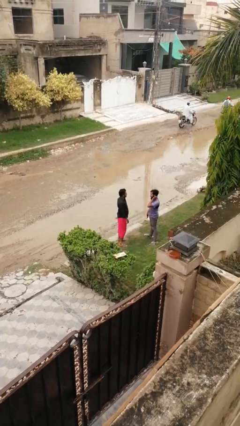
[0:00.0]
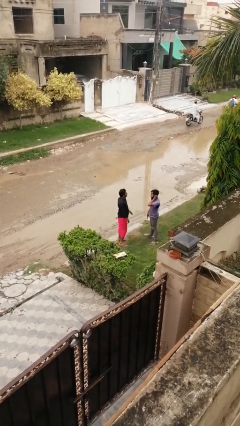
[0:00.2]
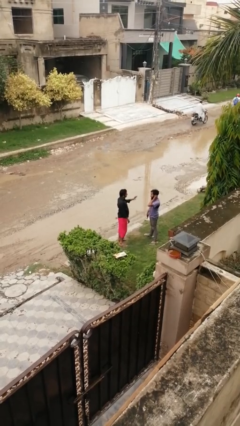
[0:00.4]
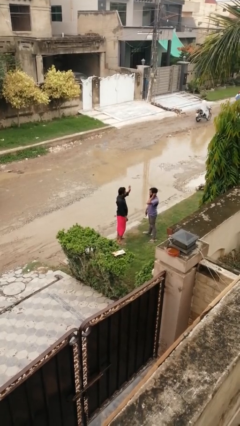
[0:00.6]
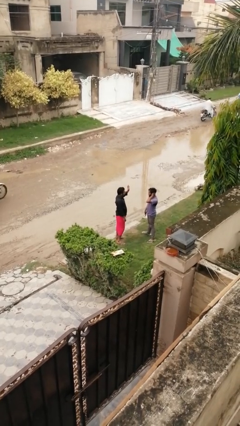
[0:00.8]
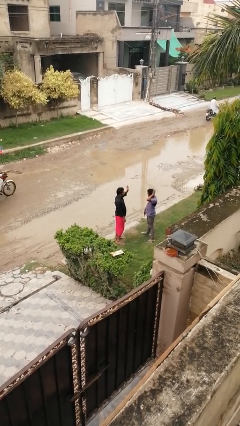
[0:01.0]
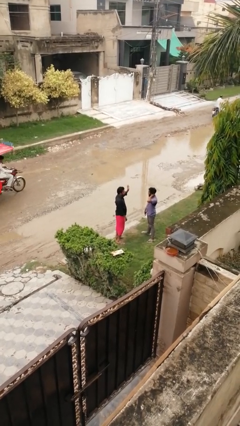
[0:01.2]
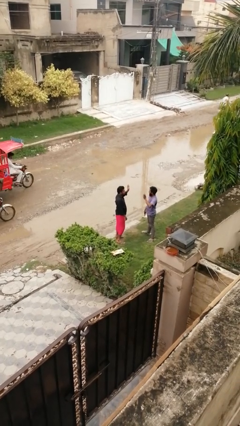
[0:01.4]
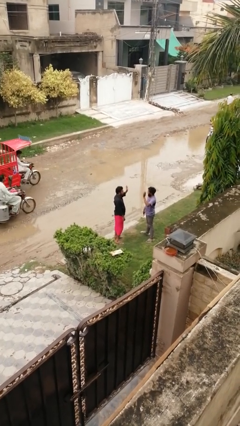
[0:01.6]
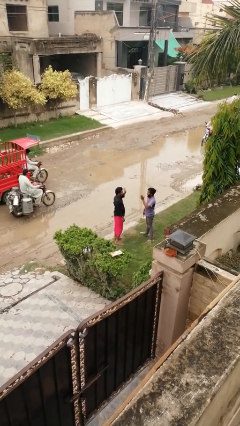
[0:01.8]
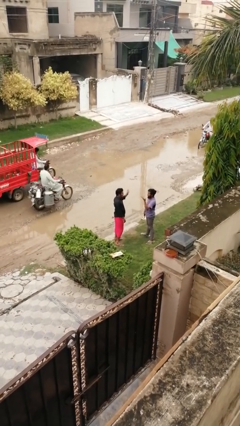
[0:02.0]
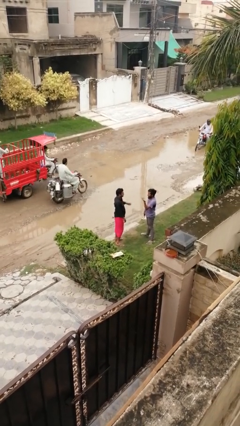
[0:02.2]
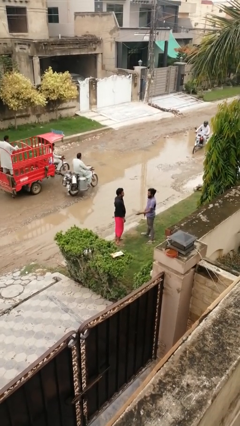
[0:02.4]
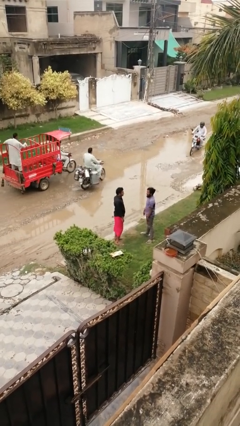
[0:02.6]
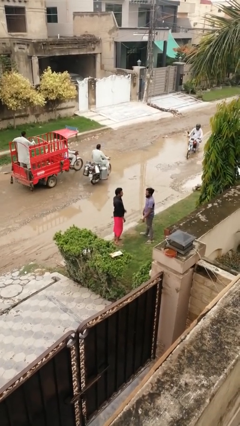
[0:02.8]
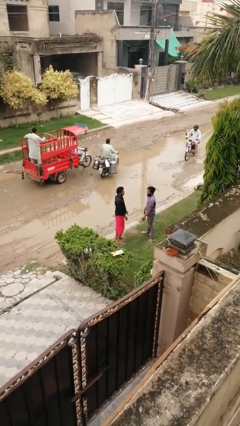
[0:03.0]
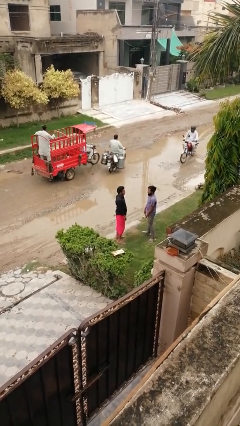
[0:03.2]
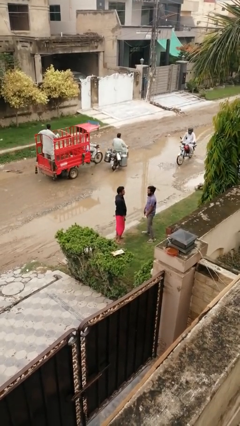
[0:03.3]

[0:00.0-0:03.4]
person talks to person

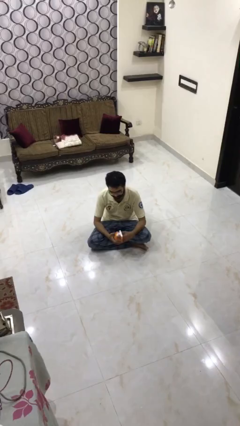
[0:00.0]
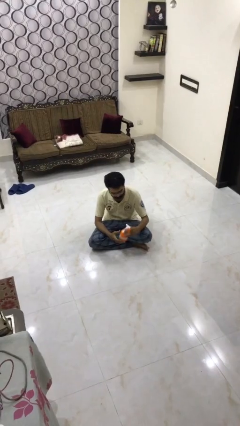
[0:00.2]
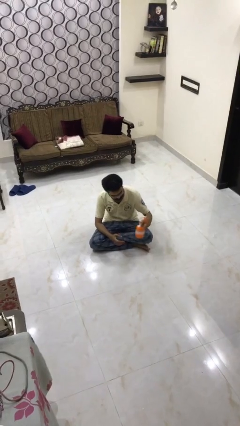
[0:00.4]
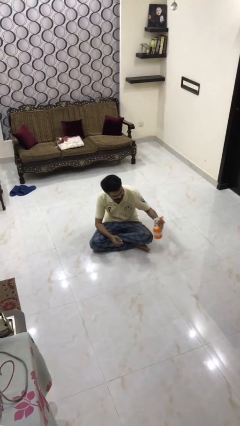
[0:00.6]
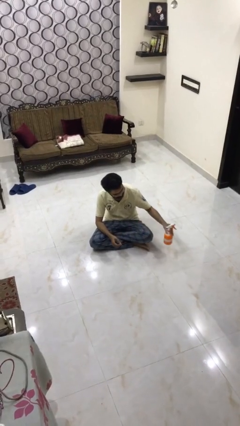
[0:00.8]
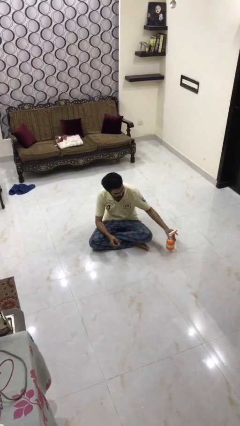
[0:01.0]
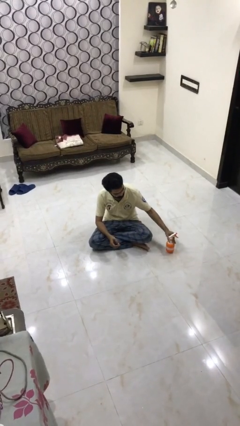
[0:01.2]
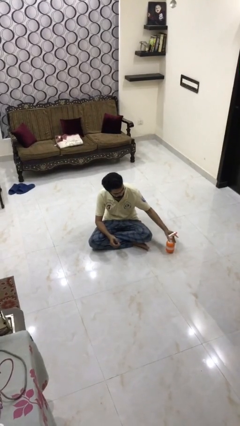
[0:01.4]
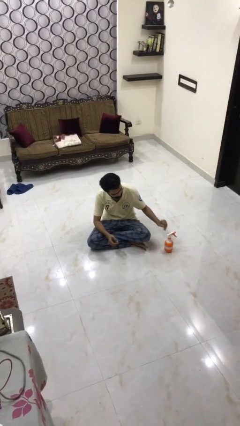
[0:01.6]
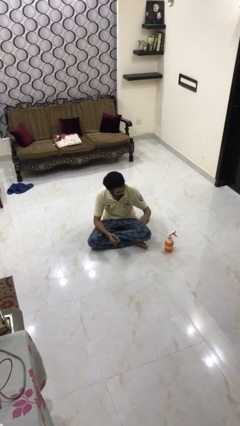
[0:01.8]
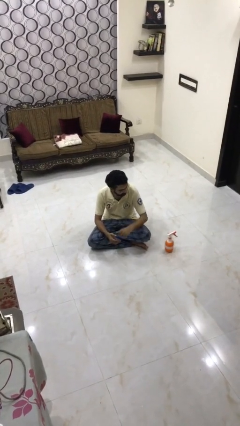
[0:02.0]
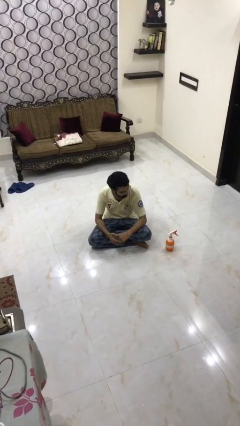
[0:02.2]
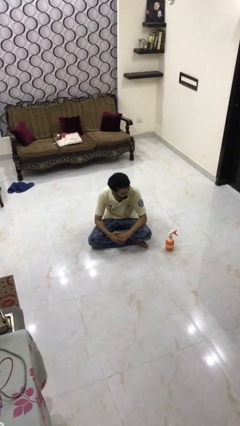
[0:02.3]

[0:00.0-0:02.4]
person puts down object on floor

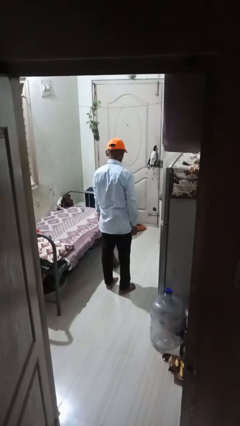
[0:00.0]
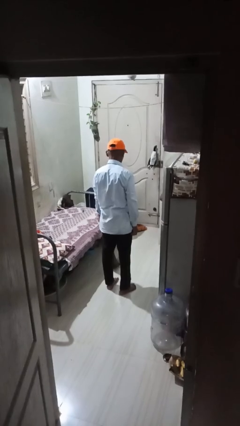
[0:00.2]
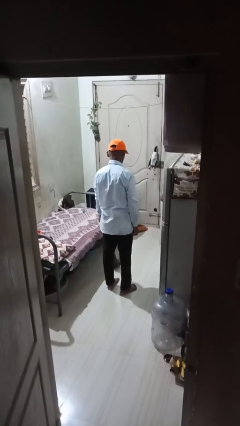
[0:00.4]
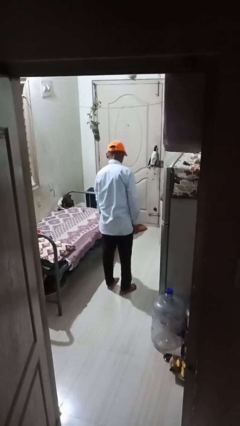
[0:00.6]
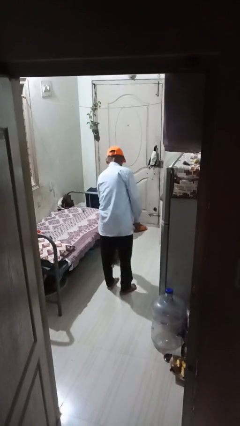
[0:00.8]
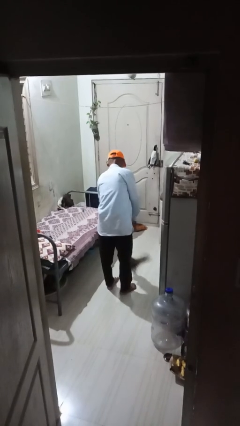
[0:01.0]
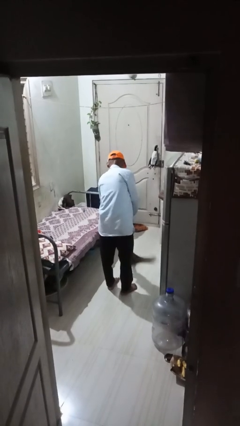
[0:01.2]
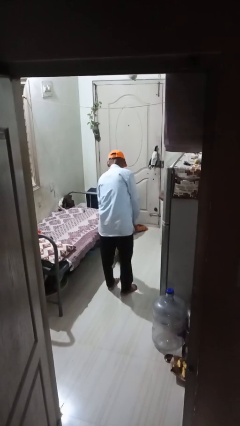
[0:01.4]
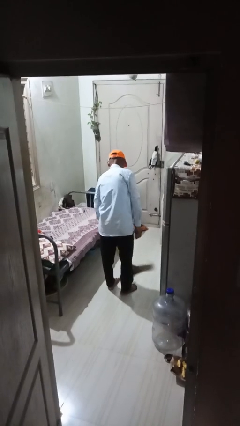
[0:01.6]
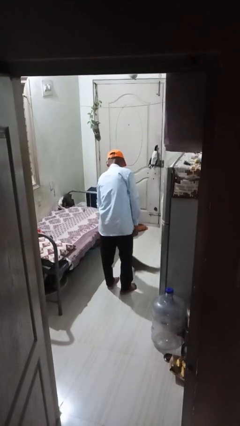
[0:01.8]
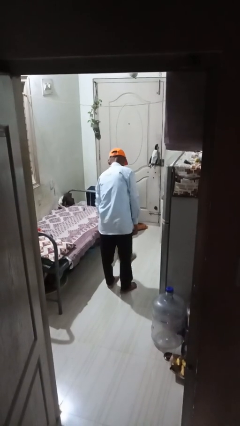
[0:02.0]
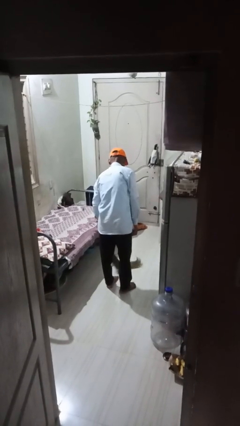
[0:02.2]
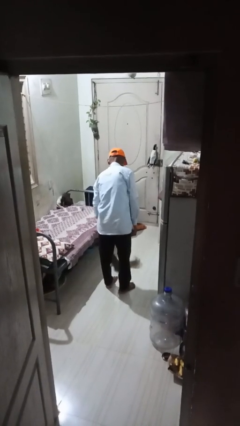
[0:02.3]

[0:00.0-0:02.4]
person mops

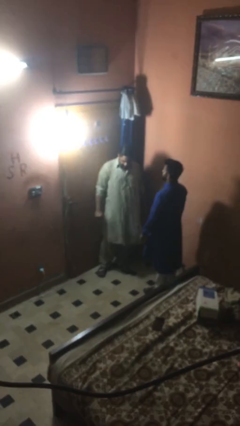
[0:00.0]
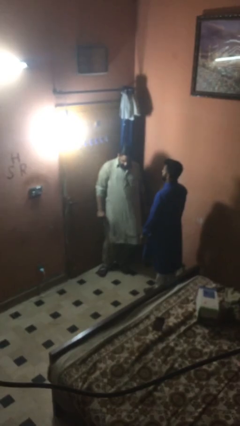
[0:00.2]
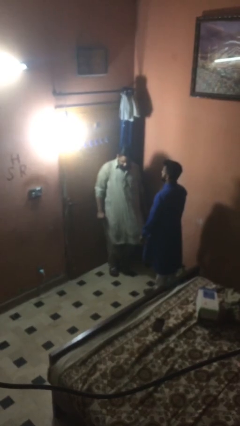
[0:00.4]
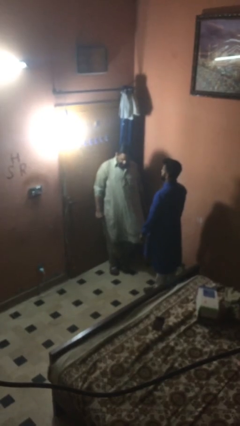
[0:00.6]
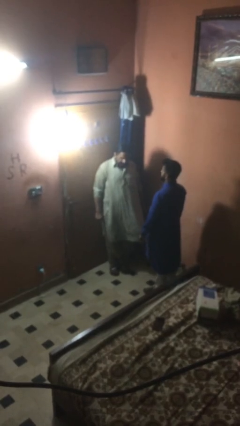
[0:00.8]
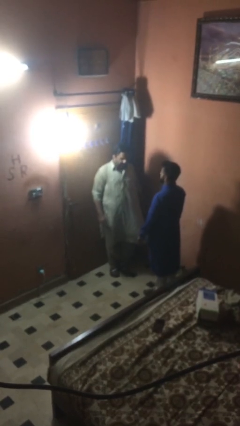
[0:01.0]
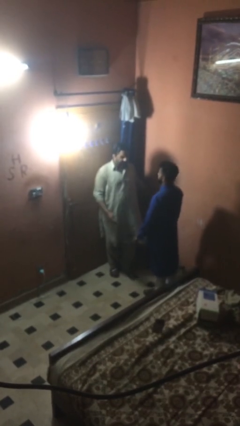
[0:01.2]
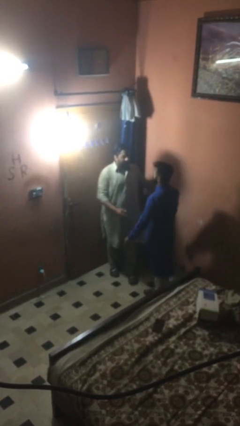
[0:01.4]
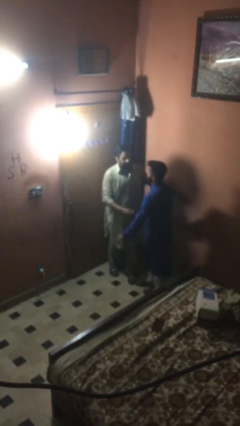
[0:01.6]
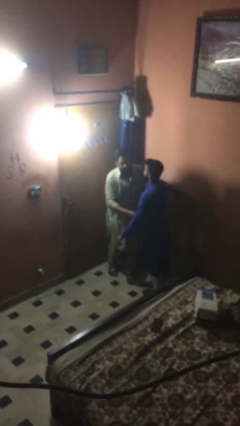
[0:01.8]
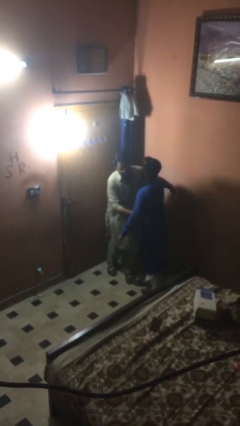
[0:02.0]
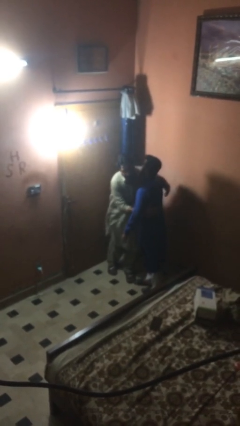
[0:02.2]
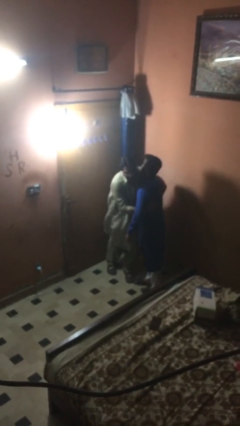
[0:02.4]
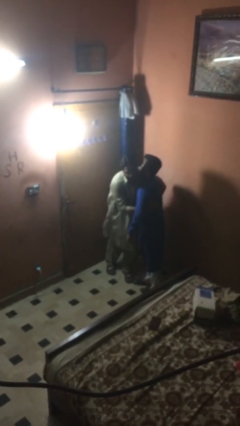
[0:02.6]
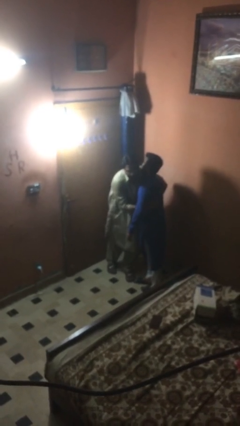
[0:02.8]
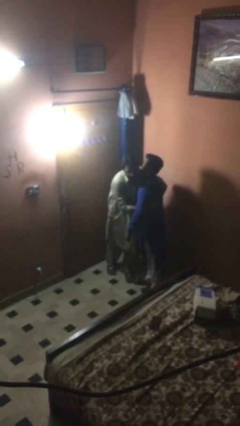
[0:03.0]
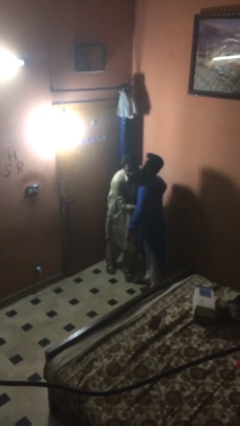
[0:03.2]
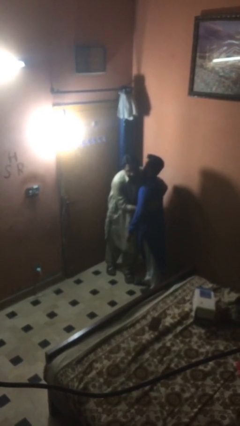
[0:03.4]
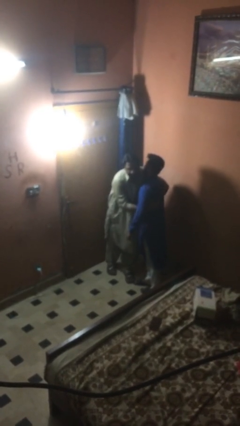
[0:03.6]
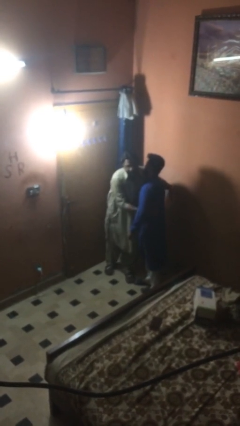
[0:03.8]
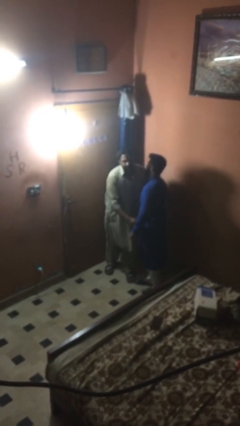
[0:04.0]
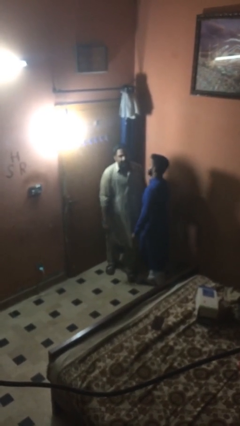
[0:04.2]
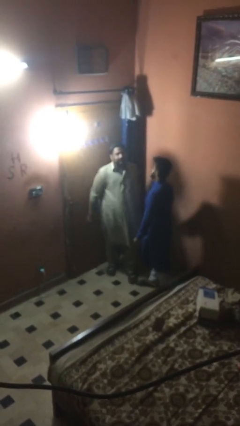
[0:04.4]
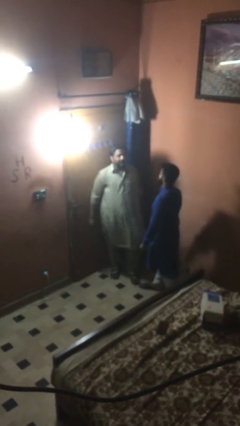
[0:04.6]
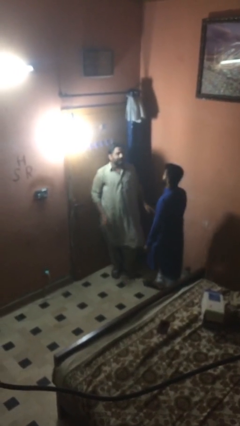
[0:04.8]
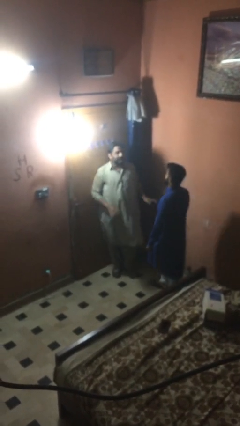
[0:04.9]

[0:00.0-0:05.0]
person embraces person

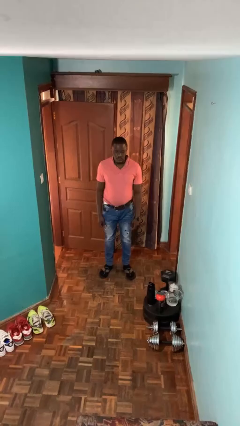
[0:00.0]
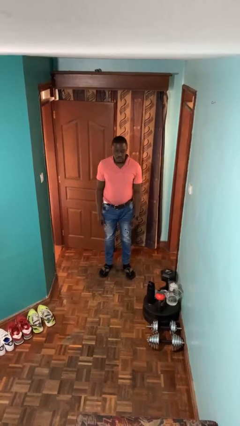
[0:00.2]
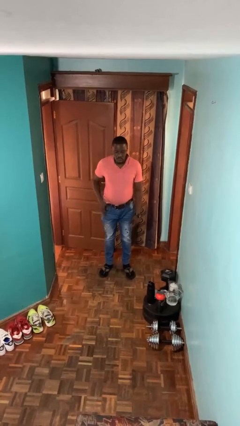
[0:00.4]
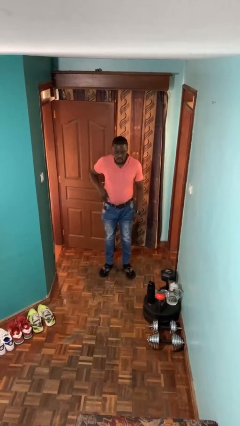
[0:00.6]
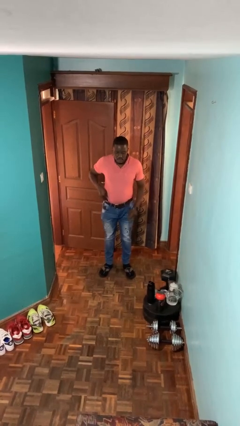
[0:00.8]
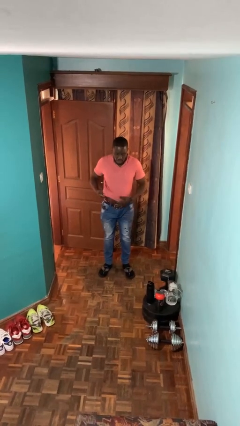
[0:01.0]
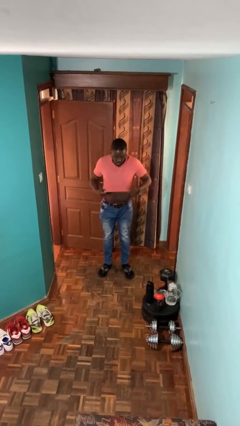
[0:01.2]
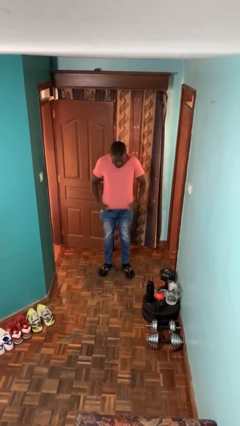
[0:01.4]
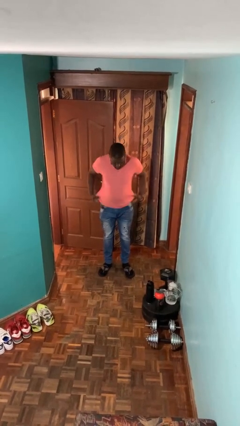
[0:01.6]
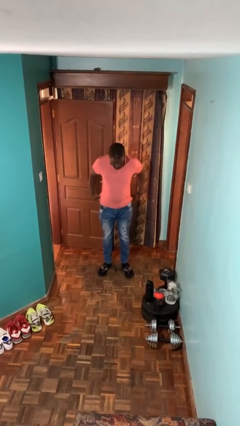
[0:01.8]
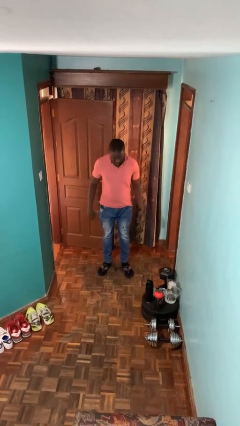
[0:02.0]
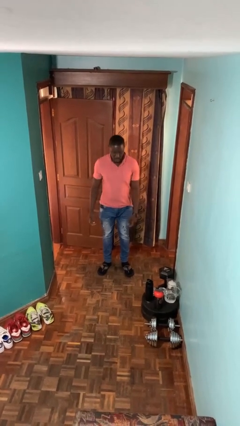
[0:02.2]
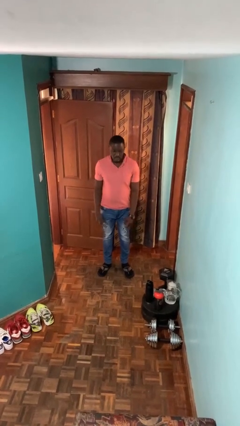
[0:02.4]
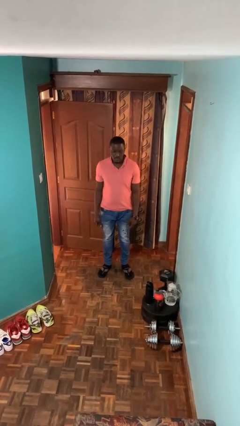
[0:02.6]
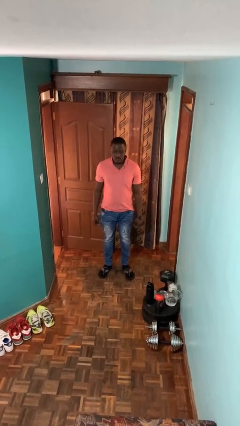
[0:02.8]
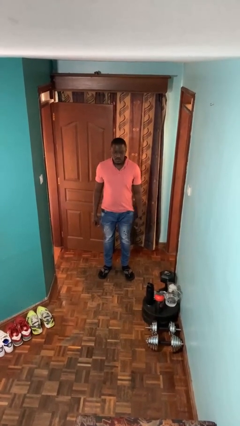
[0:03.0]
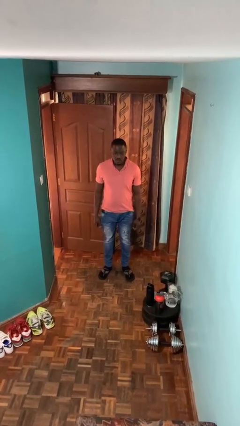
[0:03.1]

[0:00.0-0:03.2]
person untucks shirt

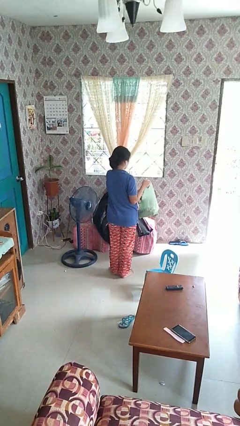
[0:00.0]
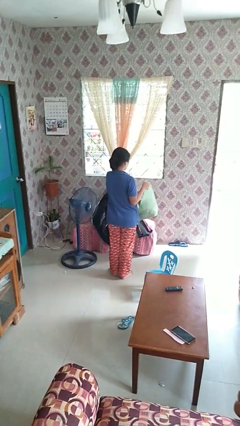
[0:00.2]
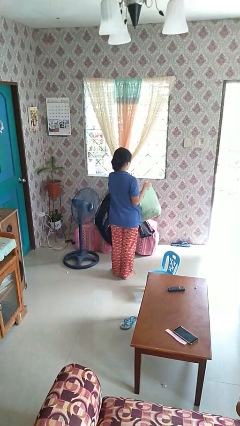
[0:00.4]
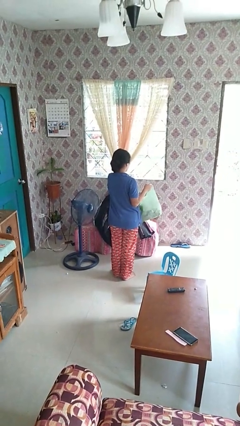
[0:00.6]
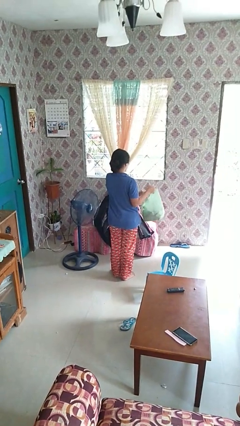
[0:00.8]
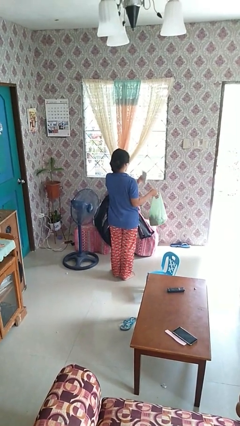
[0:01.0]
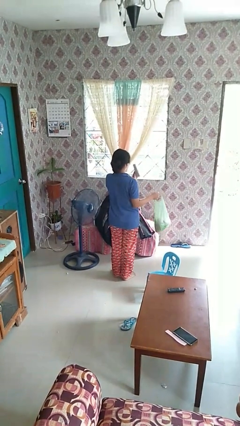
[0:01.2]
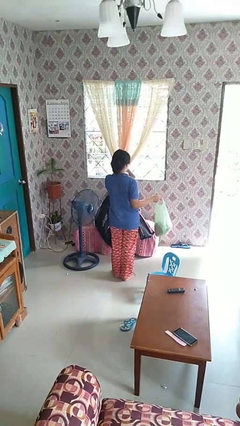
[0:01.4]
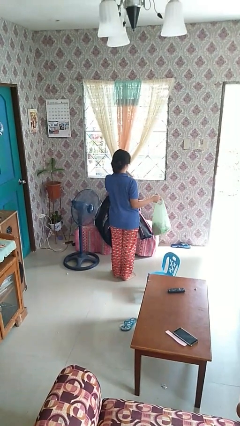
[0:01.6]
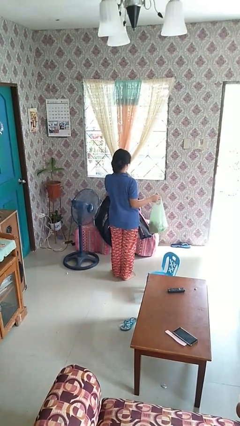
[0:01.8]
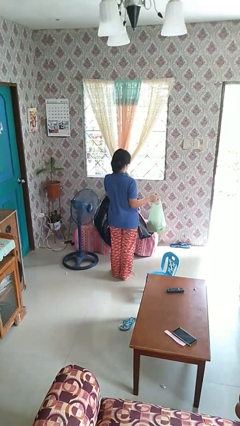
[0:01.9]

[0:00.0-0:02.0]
person takes object from bag
